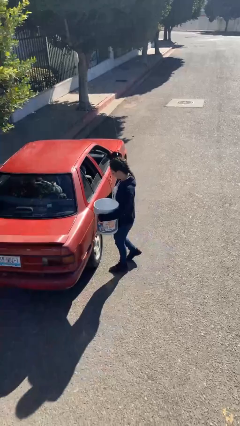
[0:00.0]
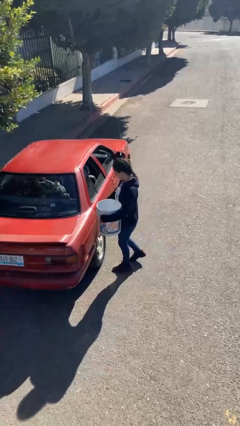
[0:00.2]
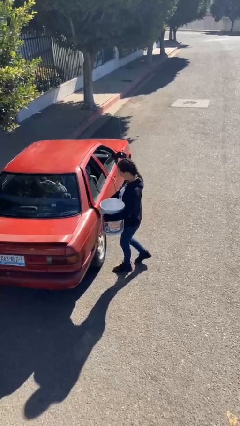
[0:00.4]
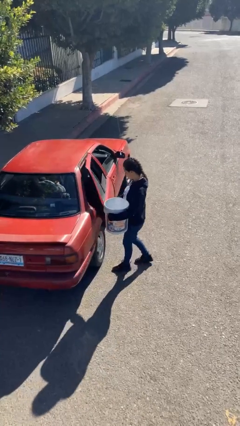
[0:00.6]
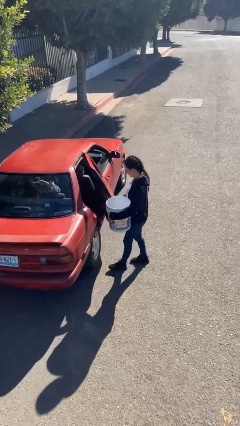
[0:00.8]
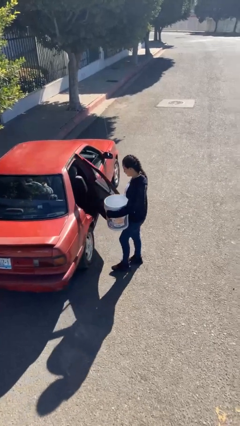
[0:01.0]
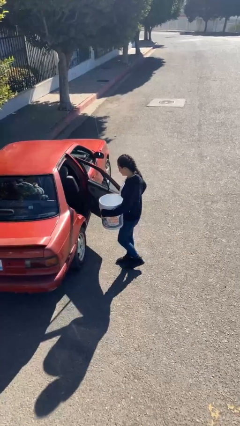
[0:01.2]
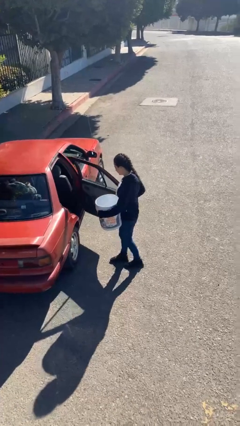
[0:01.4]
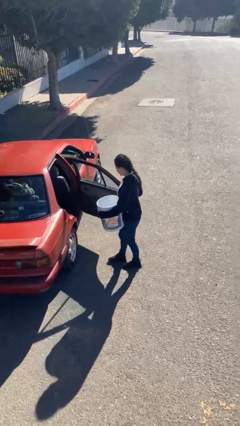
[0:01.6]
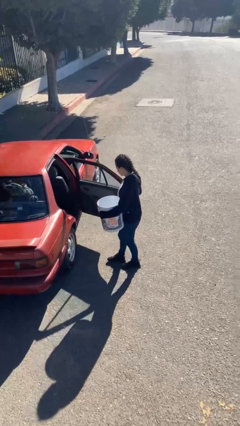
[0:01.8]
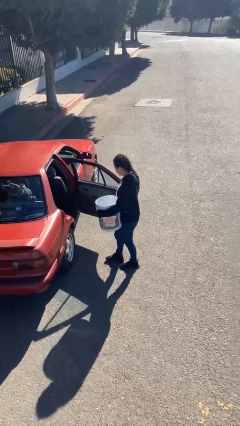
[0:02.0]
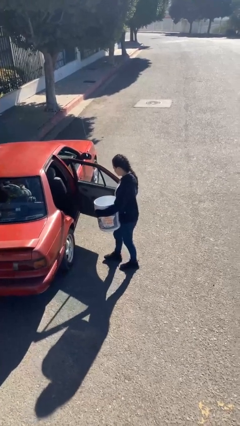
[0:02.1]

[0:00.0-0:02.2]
person opens car door

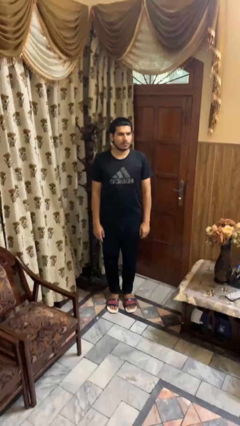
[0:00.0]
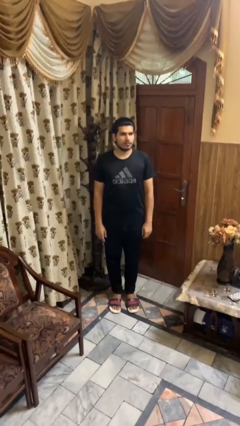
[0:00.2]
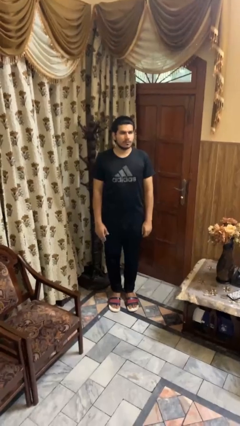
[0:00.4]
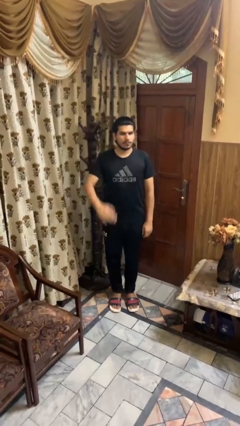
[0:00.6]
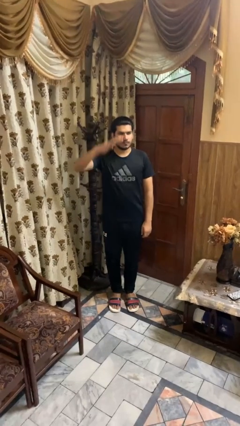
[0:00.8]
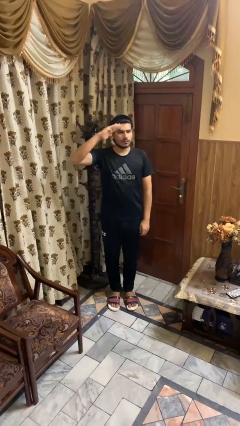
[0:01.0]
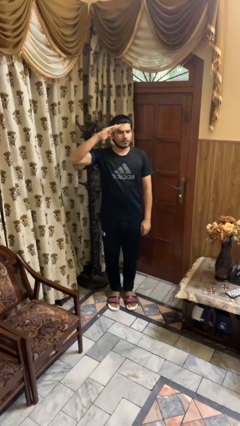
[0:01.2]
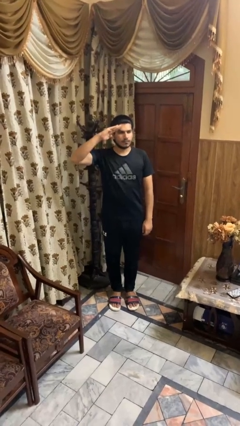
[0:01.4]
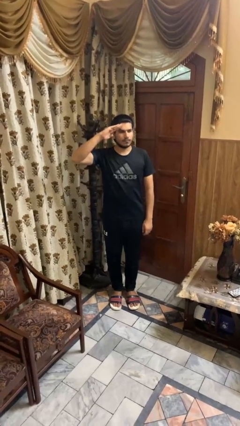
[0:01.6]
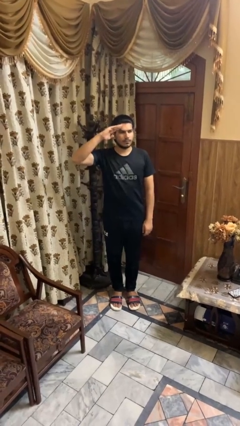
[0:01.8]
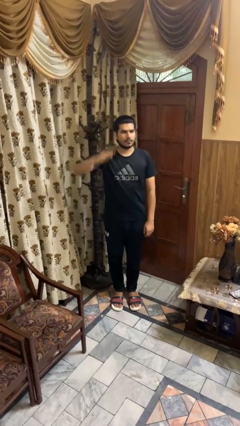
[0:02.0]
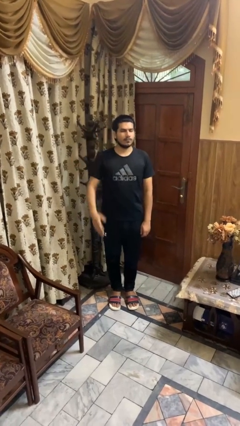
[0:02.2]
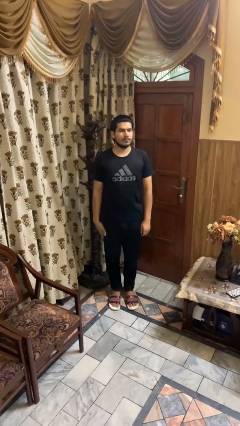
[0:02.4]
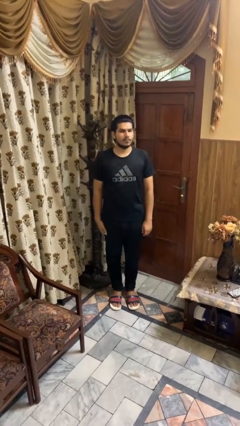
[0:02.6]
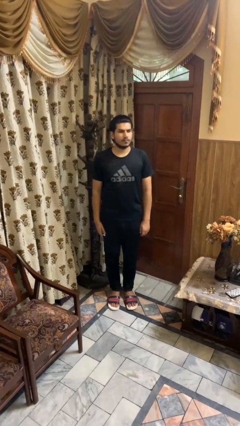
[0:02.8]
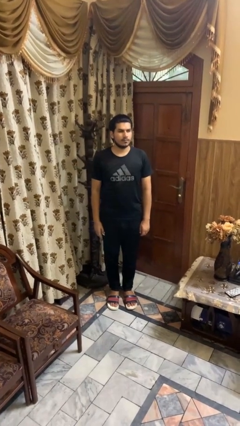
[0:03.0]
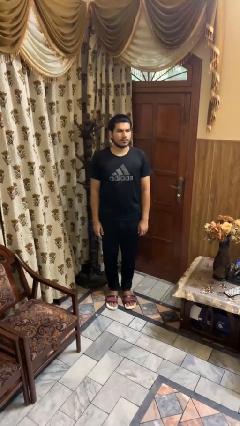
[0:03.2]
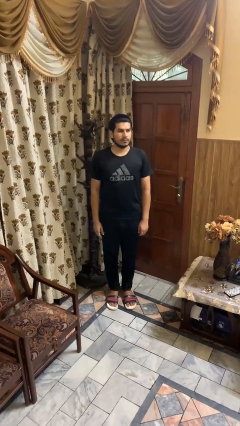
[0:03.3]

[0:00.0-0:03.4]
person salutes

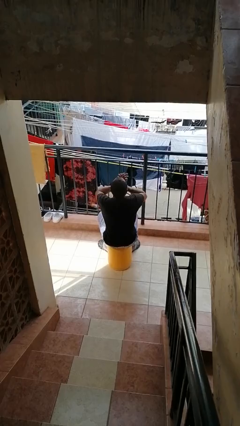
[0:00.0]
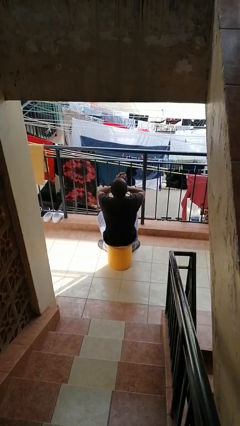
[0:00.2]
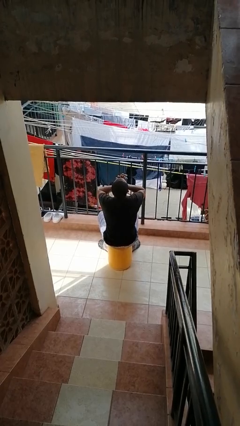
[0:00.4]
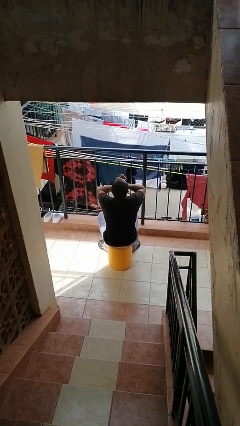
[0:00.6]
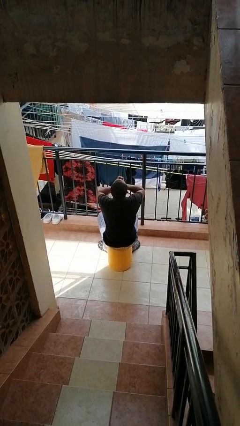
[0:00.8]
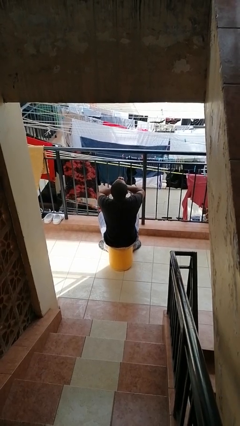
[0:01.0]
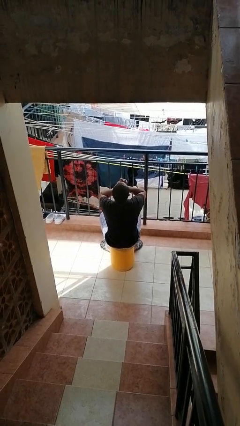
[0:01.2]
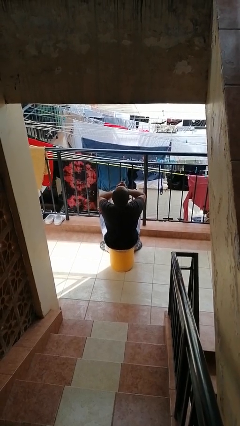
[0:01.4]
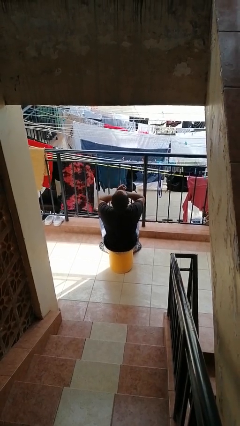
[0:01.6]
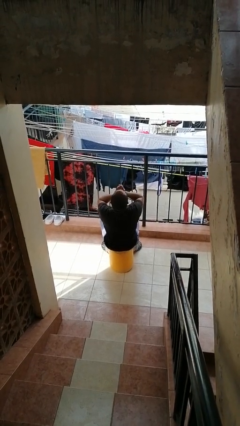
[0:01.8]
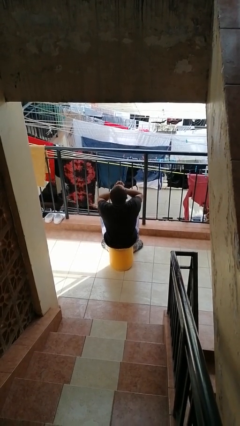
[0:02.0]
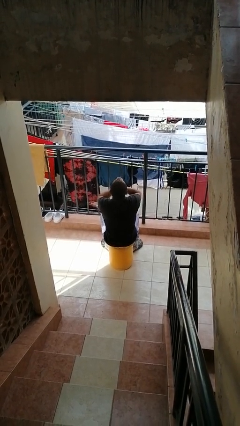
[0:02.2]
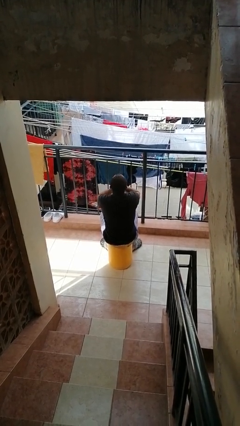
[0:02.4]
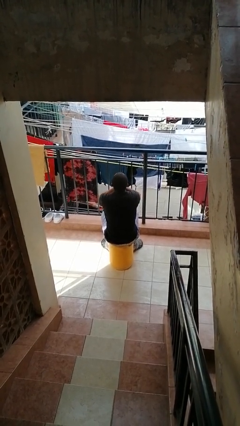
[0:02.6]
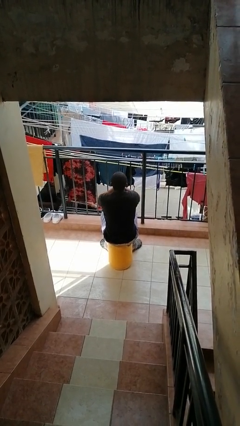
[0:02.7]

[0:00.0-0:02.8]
person blows into hands

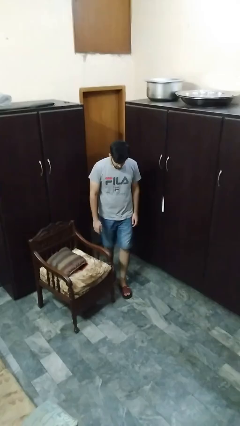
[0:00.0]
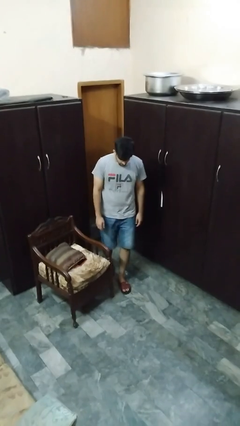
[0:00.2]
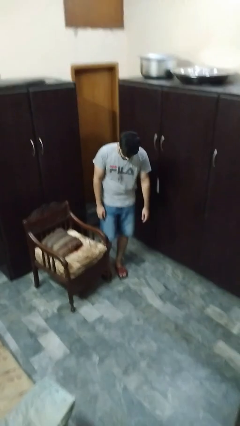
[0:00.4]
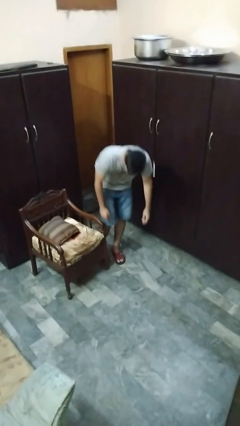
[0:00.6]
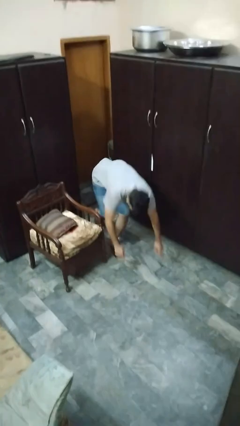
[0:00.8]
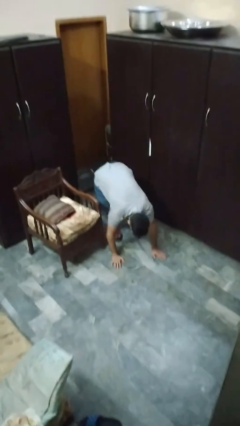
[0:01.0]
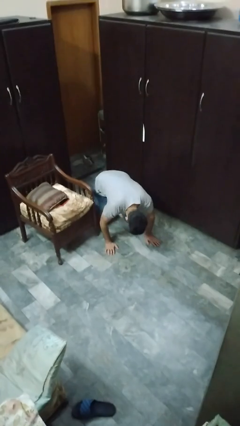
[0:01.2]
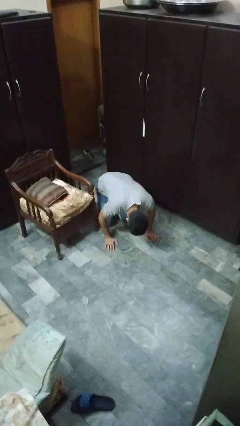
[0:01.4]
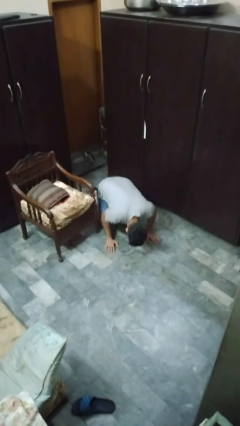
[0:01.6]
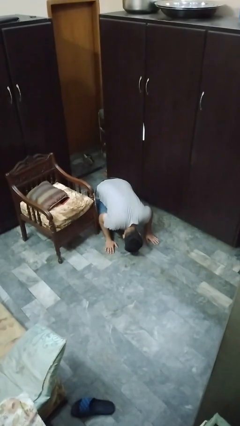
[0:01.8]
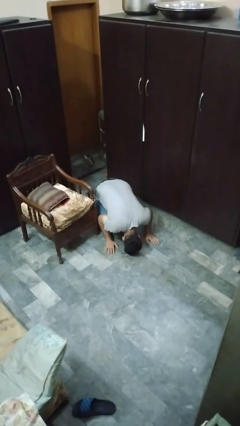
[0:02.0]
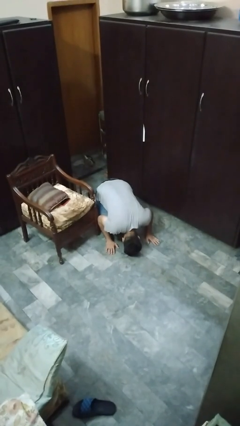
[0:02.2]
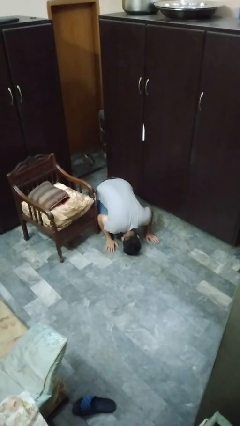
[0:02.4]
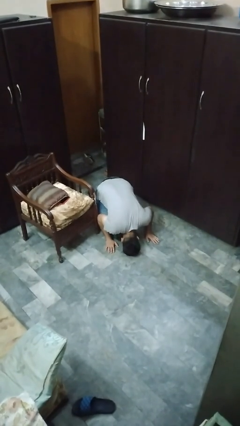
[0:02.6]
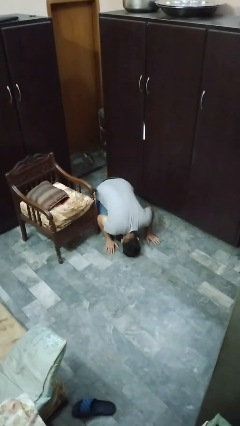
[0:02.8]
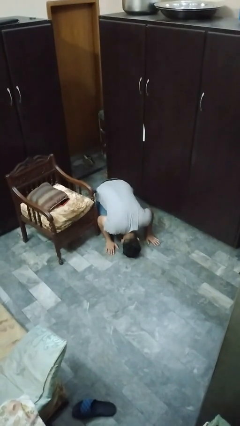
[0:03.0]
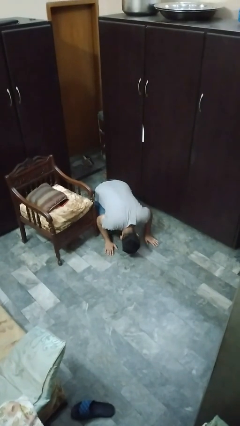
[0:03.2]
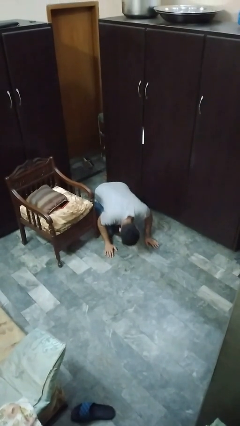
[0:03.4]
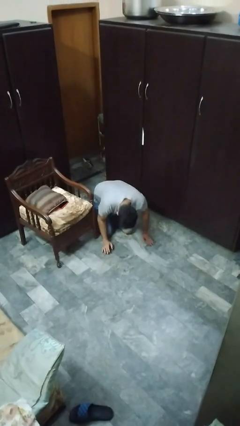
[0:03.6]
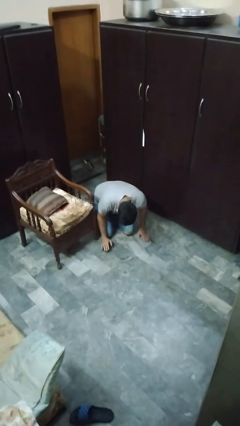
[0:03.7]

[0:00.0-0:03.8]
person trips on object on floor

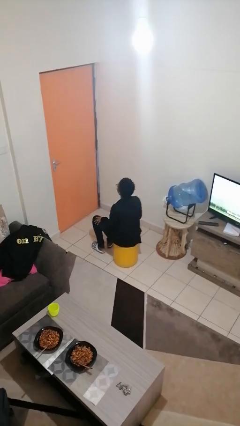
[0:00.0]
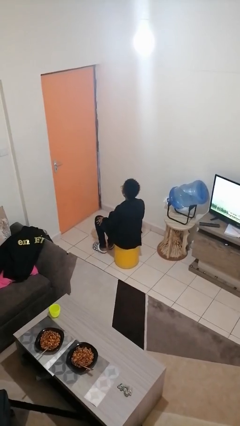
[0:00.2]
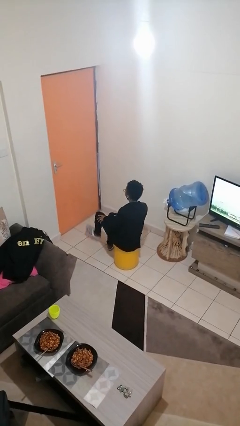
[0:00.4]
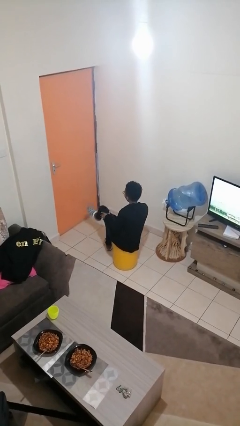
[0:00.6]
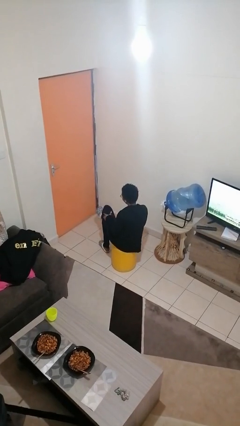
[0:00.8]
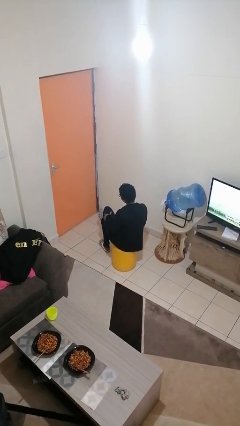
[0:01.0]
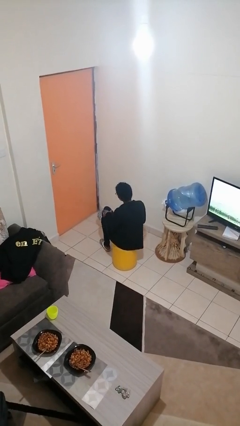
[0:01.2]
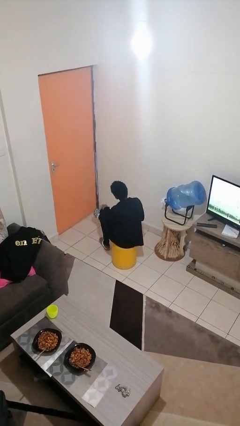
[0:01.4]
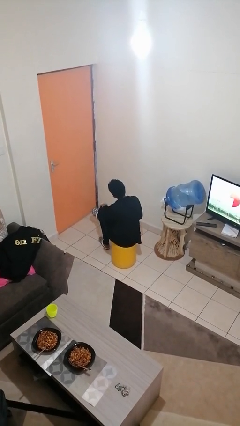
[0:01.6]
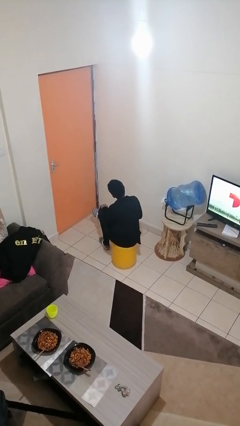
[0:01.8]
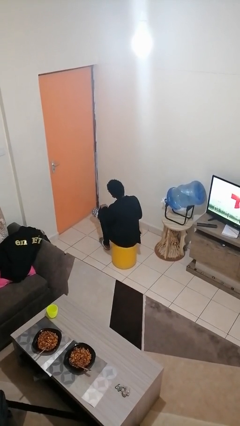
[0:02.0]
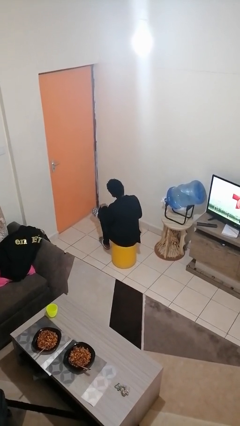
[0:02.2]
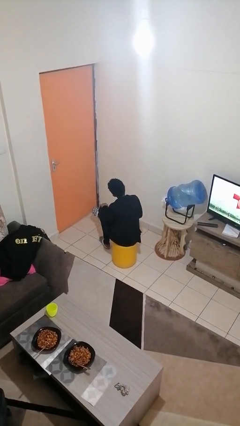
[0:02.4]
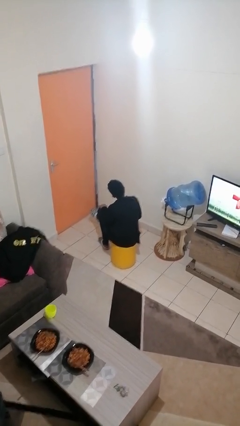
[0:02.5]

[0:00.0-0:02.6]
person crosses legs

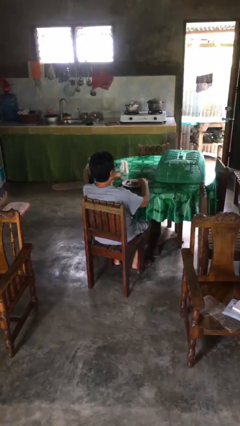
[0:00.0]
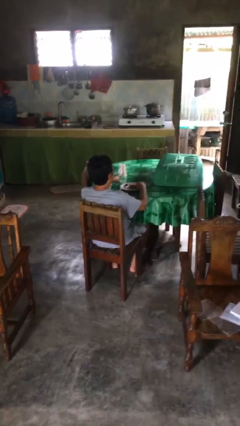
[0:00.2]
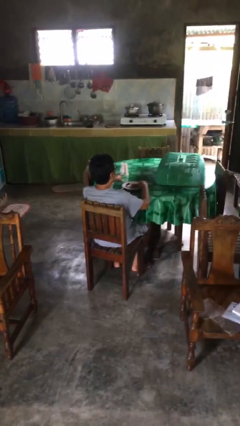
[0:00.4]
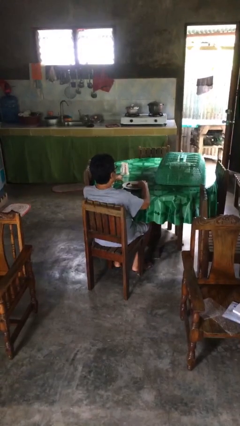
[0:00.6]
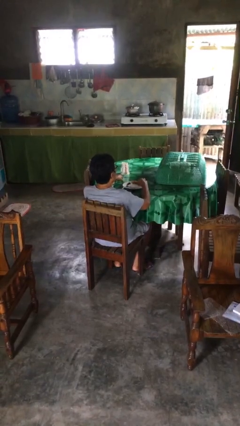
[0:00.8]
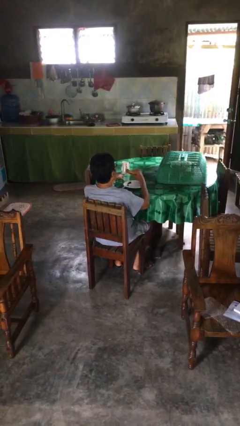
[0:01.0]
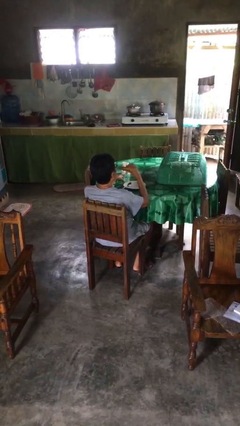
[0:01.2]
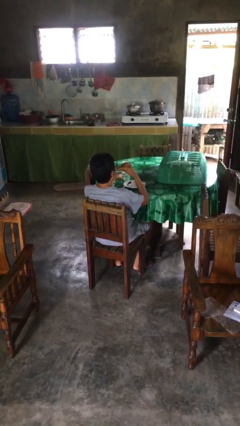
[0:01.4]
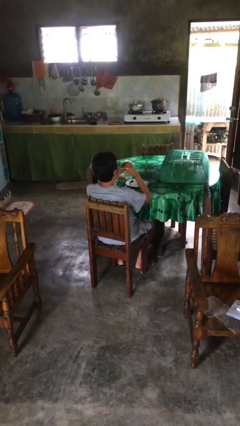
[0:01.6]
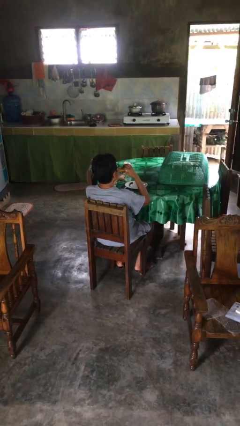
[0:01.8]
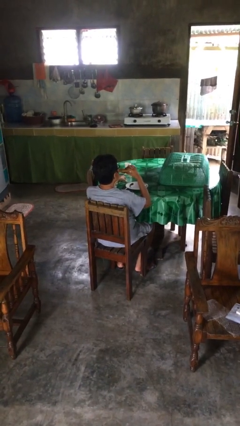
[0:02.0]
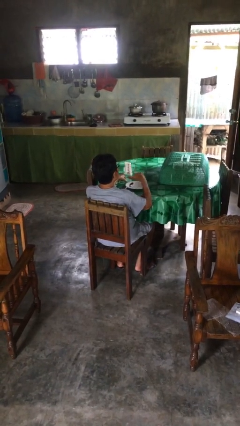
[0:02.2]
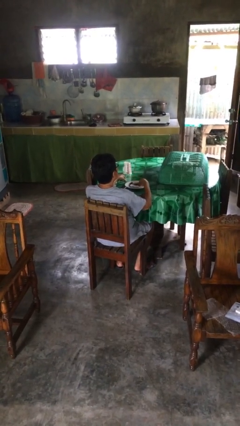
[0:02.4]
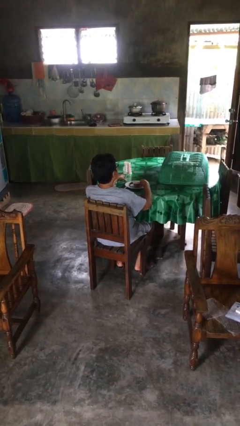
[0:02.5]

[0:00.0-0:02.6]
person eats with hands
